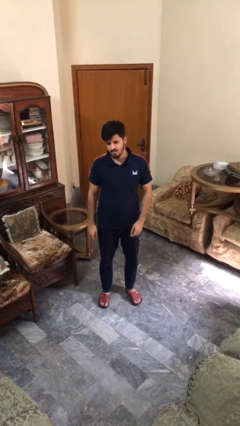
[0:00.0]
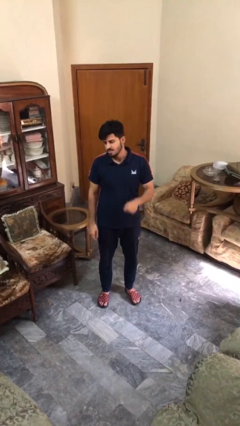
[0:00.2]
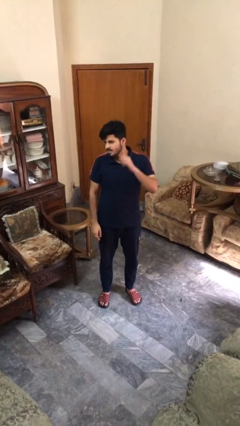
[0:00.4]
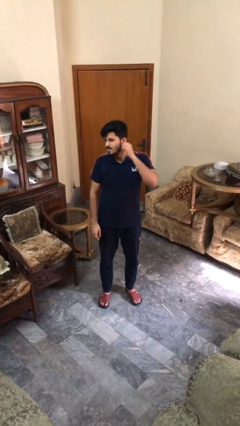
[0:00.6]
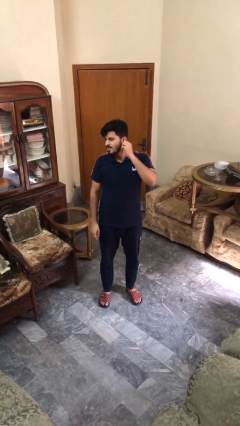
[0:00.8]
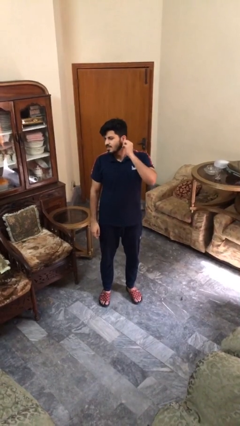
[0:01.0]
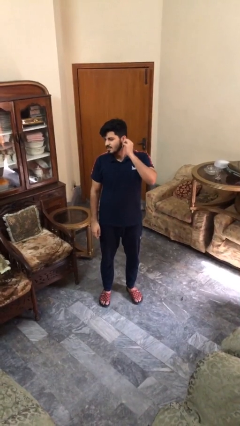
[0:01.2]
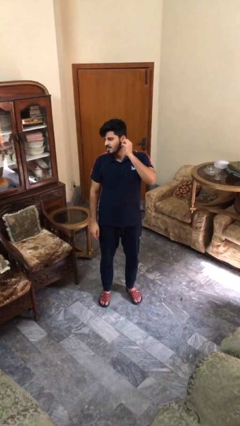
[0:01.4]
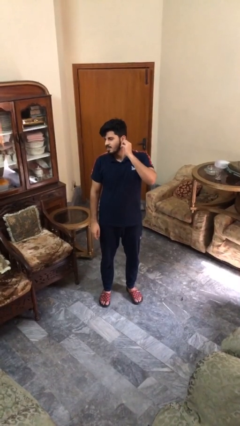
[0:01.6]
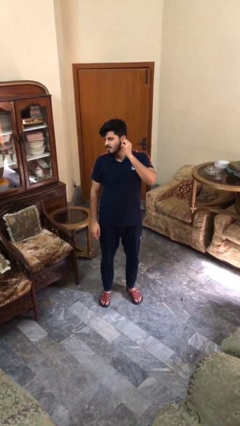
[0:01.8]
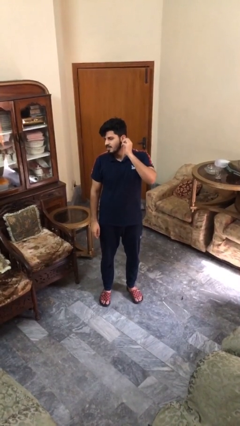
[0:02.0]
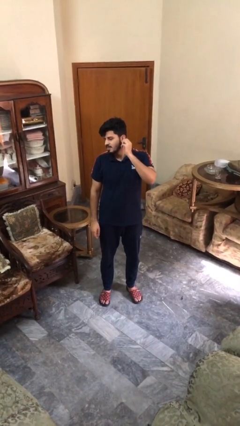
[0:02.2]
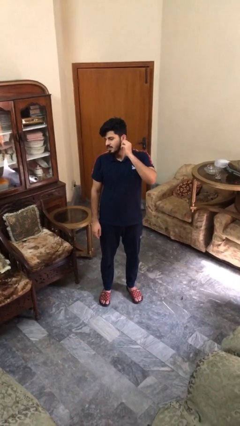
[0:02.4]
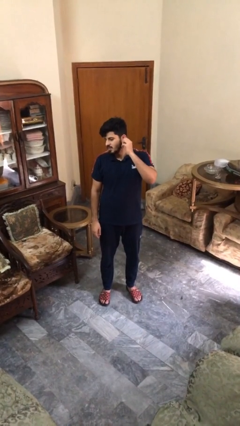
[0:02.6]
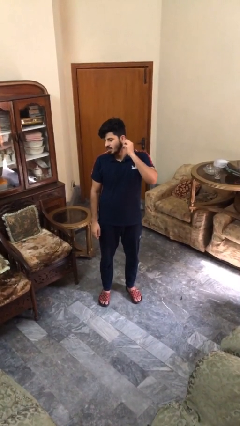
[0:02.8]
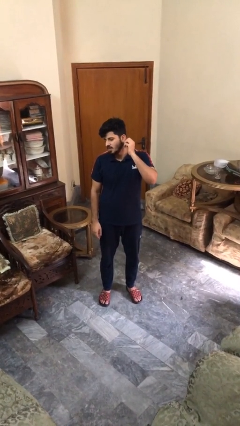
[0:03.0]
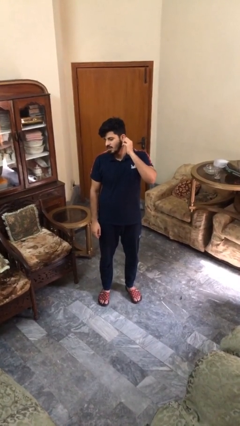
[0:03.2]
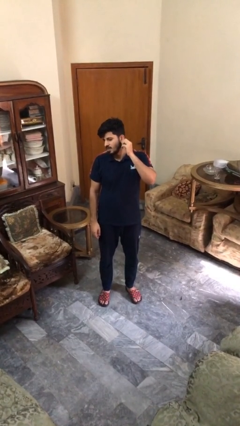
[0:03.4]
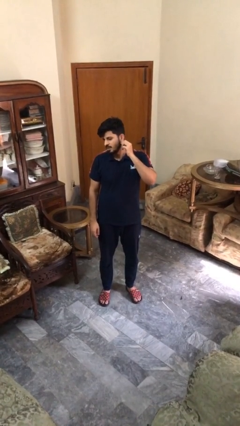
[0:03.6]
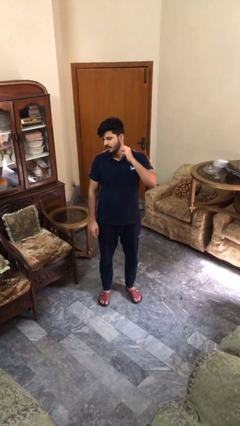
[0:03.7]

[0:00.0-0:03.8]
person touches earlobe

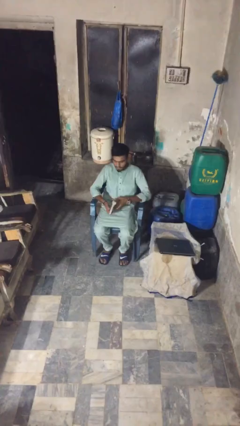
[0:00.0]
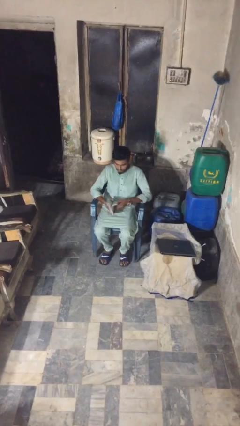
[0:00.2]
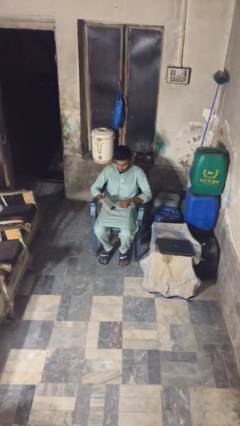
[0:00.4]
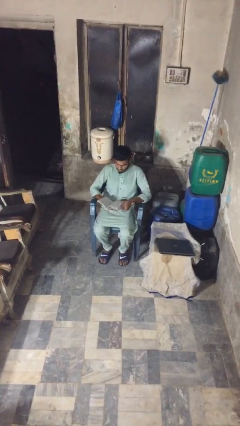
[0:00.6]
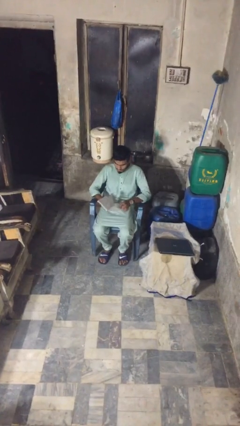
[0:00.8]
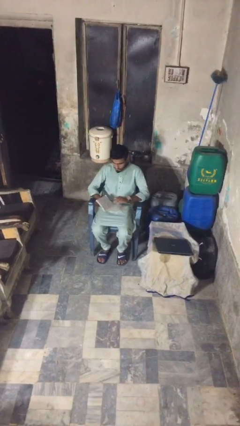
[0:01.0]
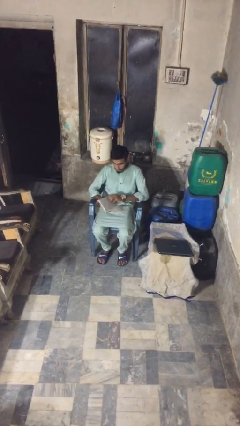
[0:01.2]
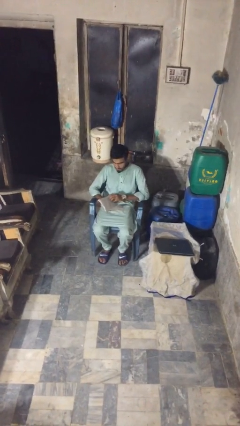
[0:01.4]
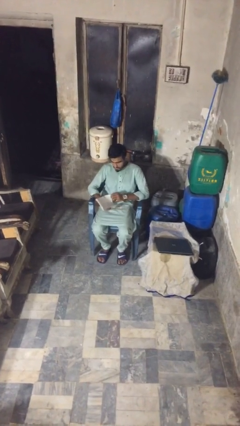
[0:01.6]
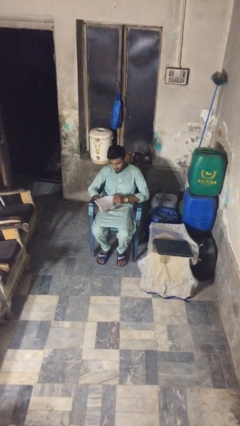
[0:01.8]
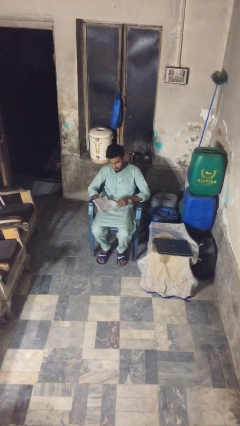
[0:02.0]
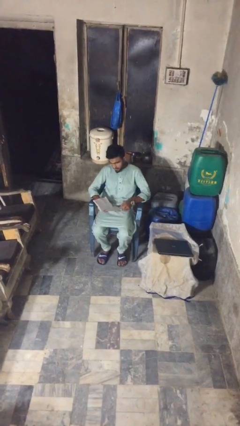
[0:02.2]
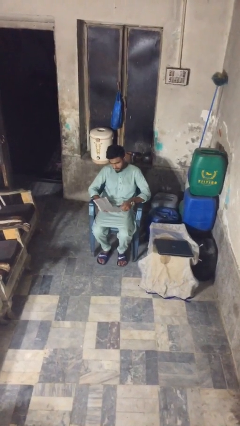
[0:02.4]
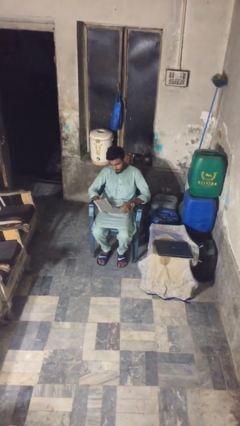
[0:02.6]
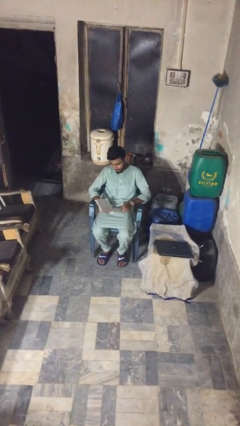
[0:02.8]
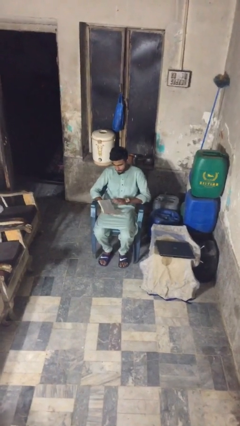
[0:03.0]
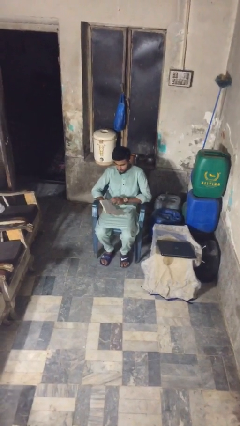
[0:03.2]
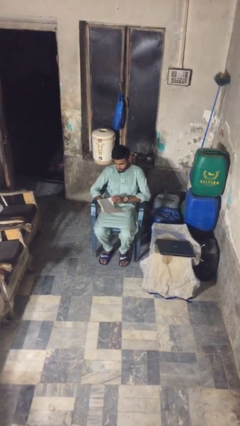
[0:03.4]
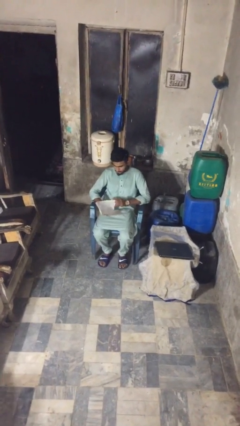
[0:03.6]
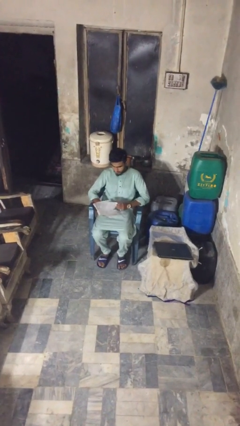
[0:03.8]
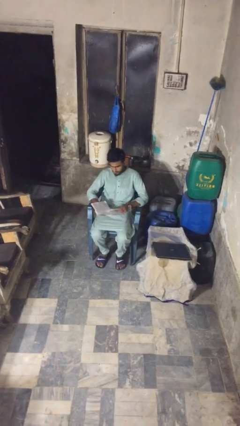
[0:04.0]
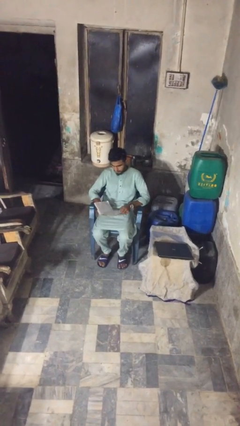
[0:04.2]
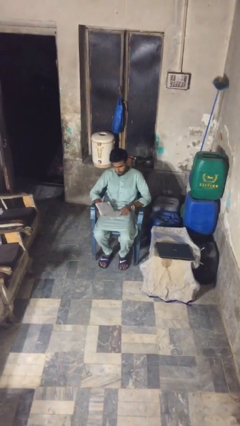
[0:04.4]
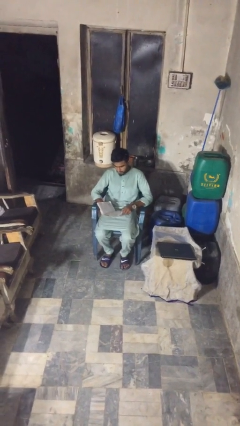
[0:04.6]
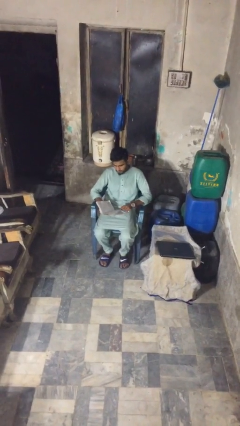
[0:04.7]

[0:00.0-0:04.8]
person reads document

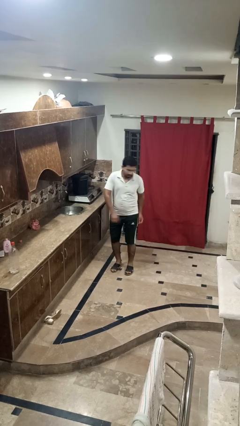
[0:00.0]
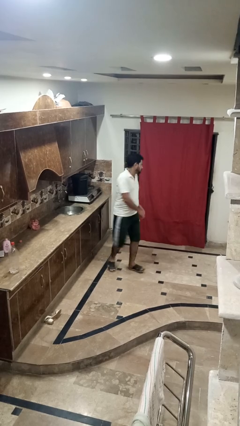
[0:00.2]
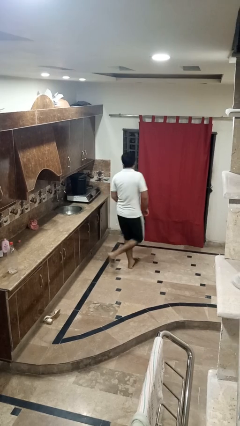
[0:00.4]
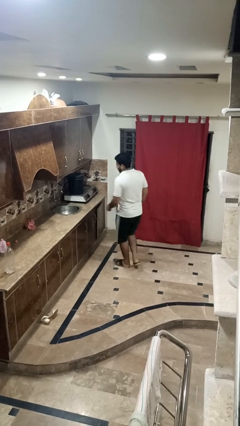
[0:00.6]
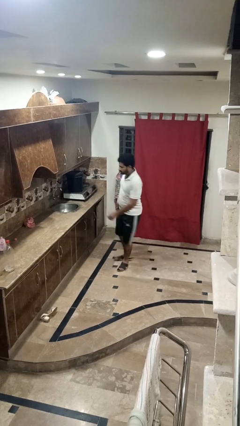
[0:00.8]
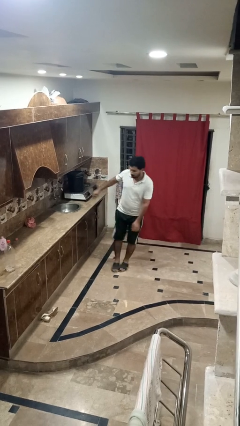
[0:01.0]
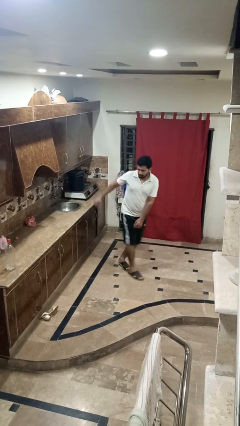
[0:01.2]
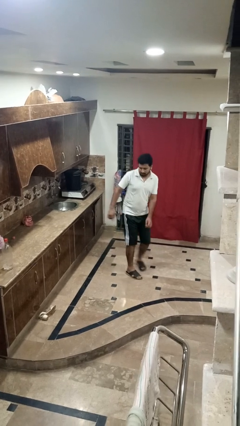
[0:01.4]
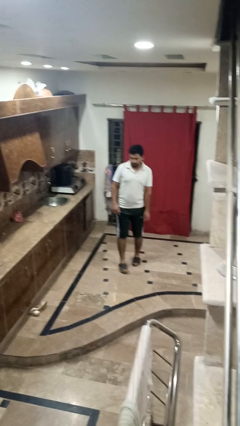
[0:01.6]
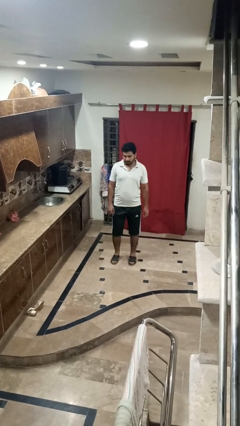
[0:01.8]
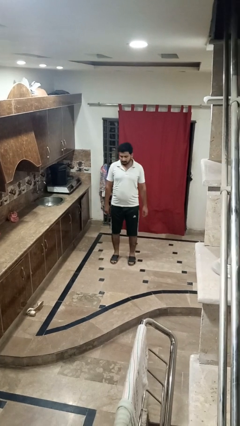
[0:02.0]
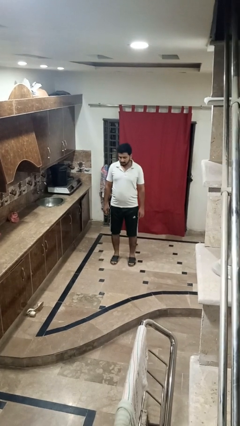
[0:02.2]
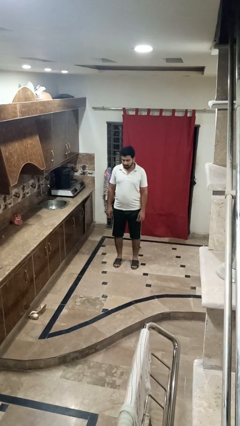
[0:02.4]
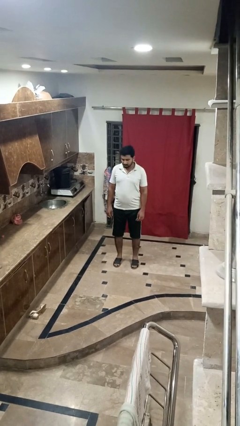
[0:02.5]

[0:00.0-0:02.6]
person twirls

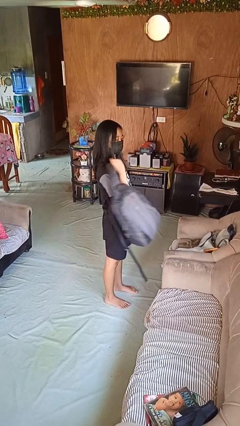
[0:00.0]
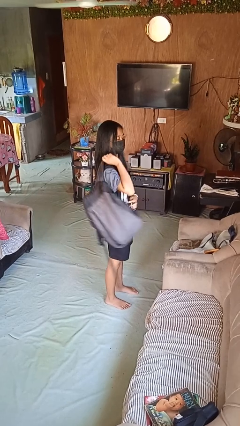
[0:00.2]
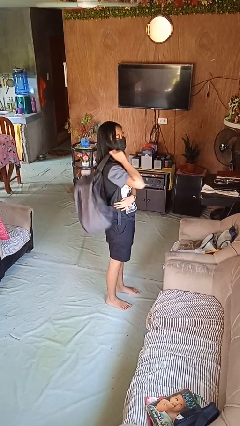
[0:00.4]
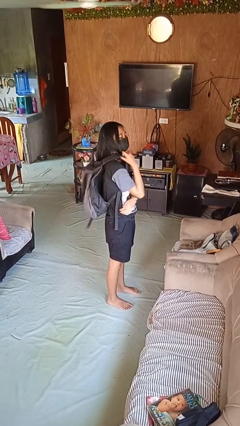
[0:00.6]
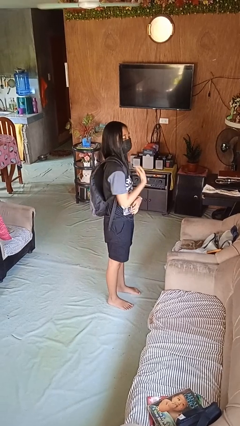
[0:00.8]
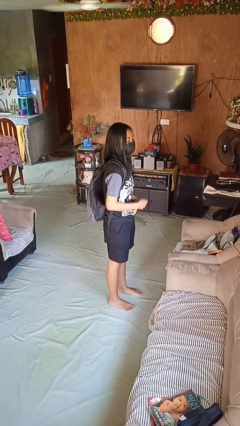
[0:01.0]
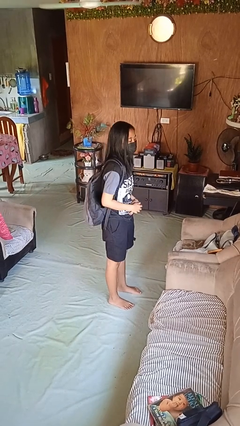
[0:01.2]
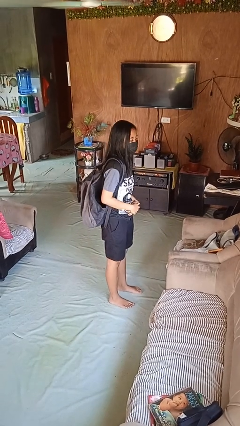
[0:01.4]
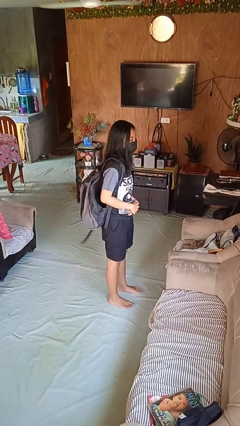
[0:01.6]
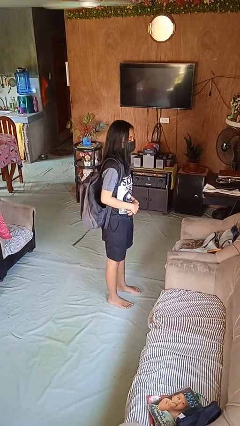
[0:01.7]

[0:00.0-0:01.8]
person puts on backpack

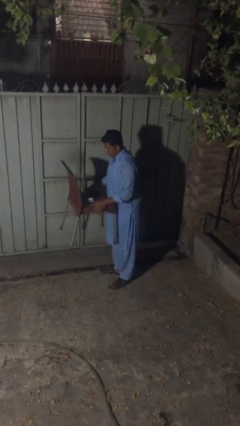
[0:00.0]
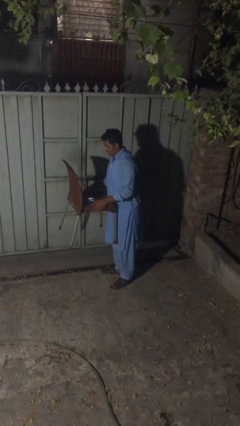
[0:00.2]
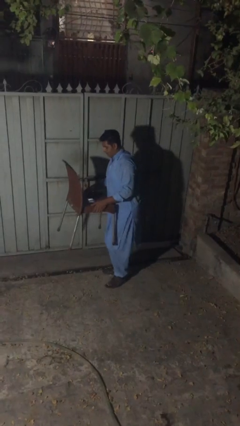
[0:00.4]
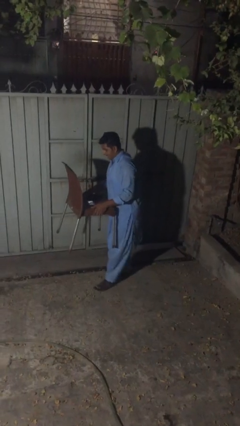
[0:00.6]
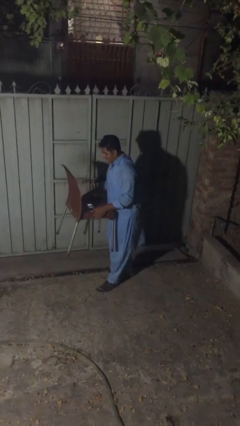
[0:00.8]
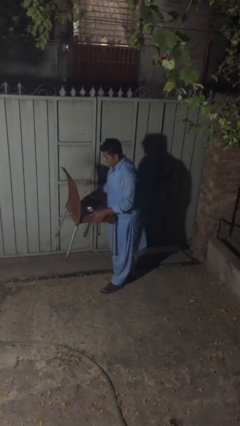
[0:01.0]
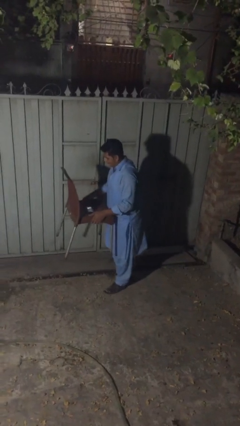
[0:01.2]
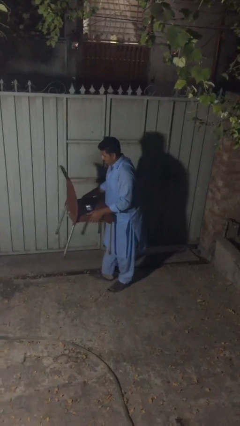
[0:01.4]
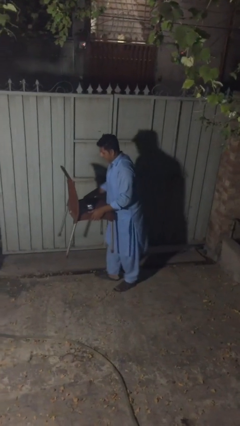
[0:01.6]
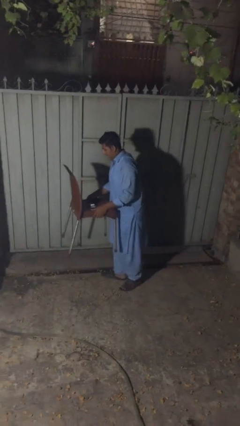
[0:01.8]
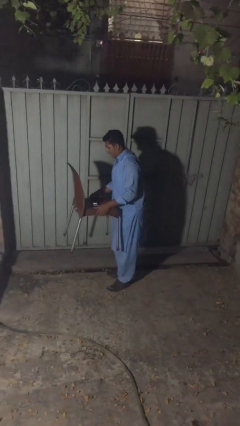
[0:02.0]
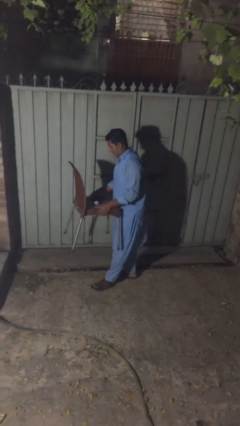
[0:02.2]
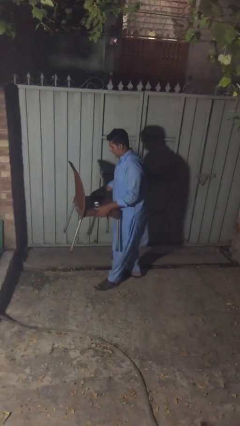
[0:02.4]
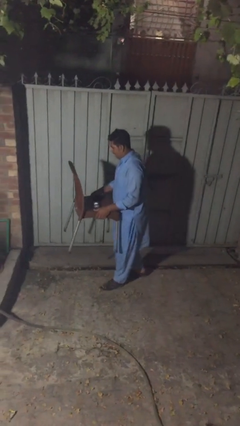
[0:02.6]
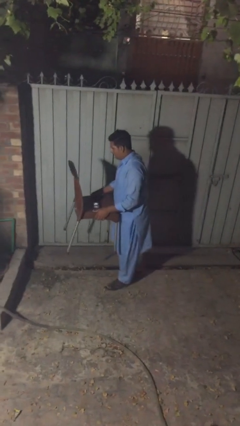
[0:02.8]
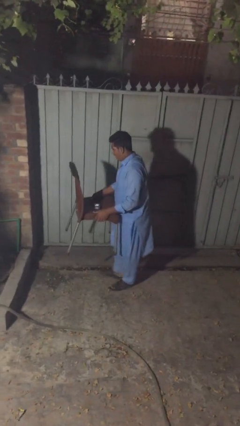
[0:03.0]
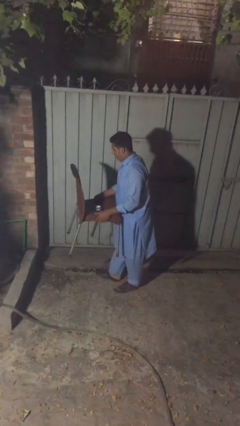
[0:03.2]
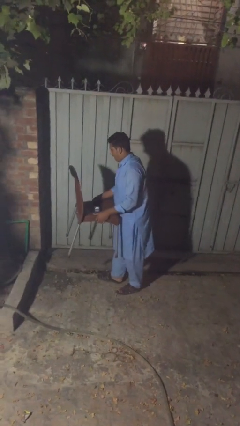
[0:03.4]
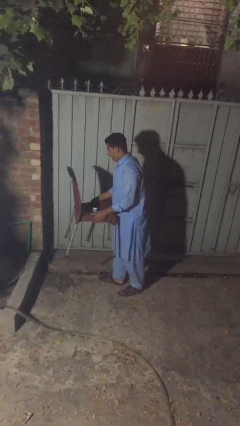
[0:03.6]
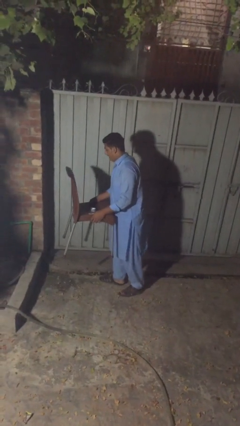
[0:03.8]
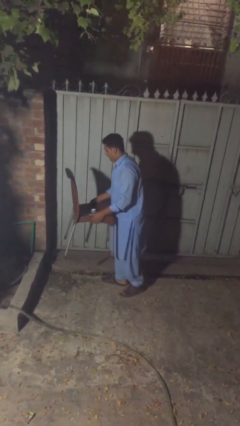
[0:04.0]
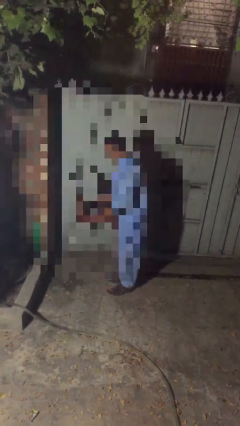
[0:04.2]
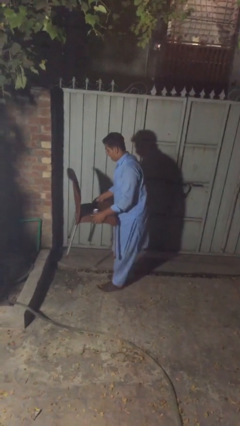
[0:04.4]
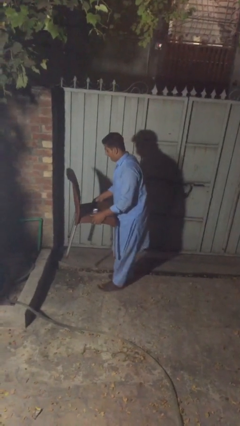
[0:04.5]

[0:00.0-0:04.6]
person carries heavy object

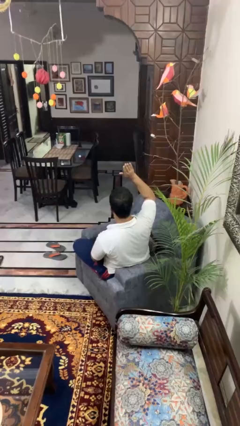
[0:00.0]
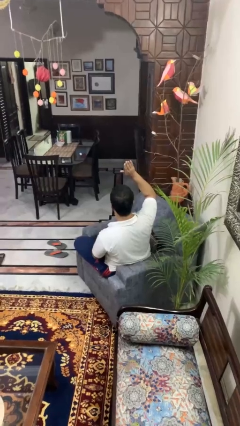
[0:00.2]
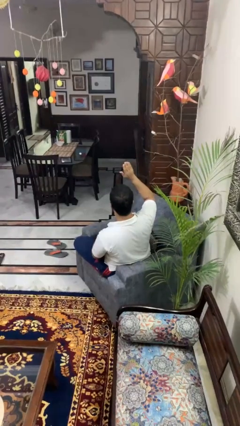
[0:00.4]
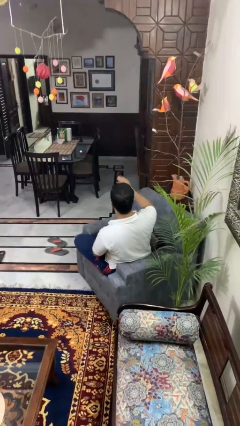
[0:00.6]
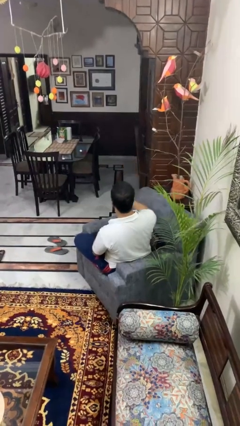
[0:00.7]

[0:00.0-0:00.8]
person gestures lower hand
